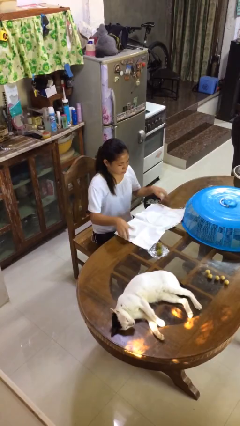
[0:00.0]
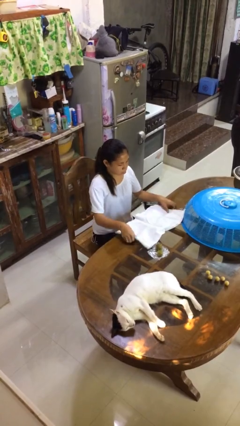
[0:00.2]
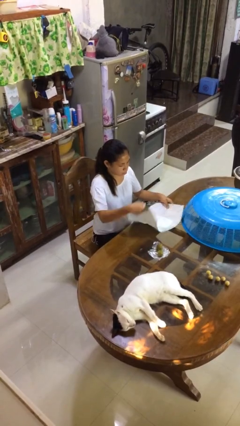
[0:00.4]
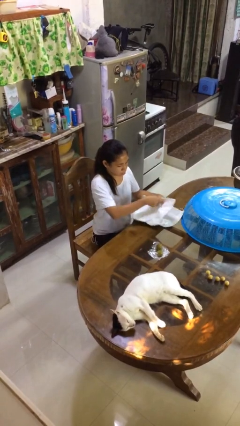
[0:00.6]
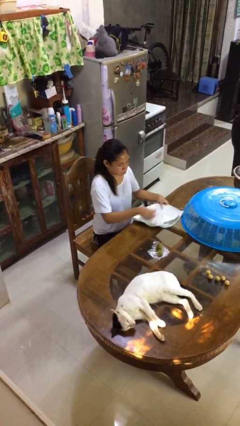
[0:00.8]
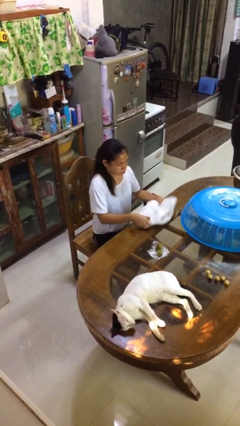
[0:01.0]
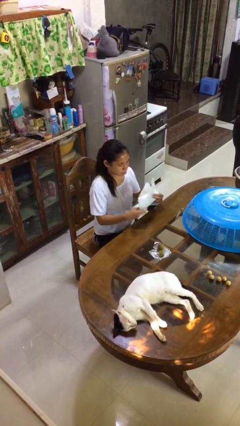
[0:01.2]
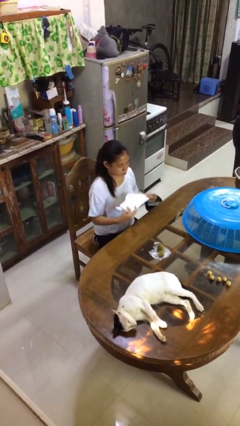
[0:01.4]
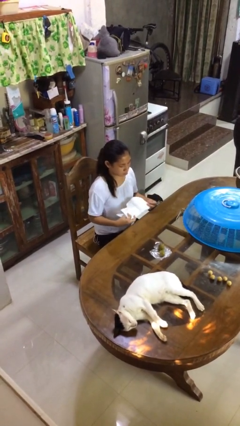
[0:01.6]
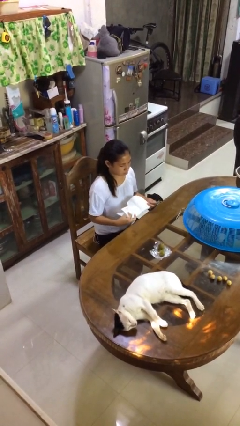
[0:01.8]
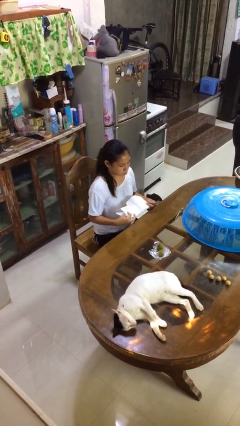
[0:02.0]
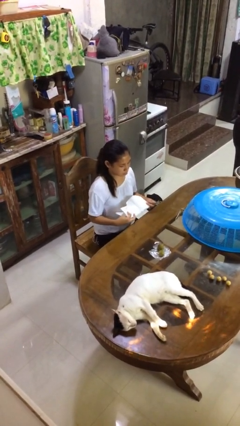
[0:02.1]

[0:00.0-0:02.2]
person folds tablecloth

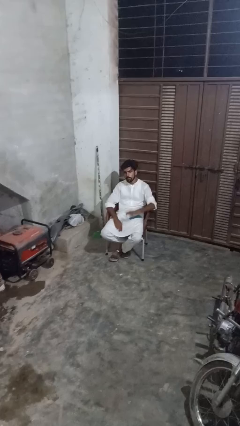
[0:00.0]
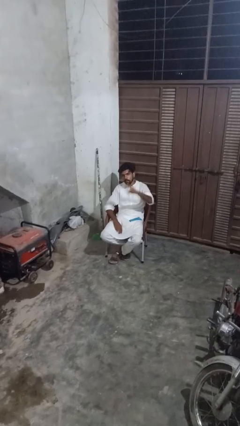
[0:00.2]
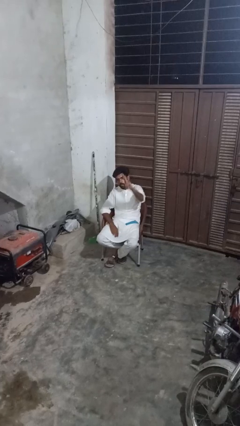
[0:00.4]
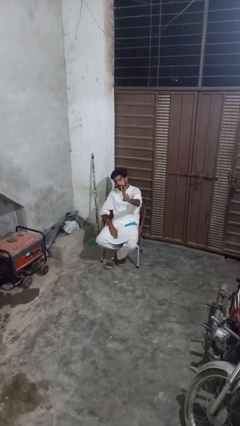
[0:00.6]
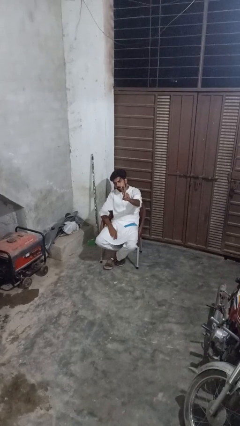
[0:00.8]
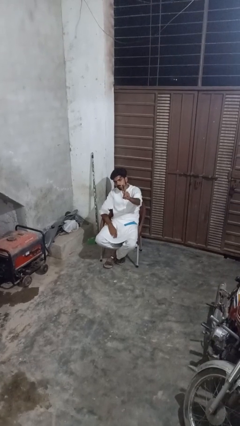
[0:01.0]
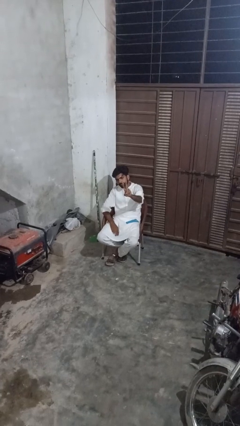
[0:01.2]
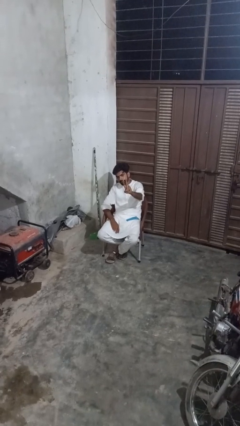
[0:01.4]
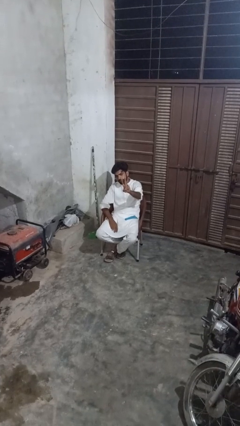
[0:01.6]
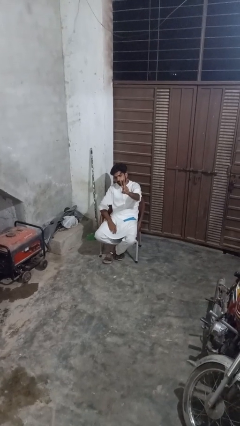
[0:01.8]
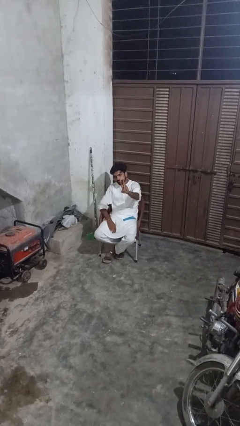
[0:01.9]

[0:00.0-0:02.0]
person gestures peace

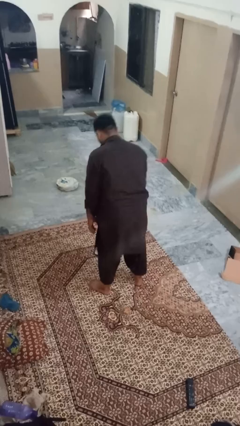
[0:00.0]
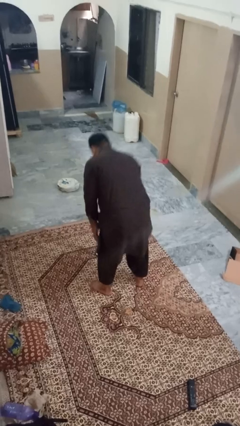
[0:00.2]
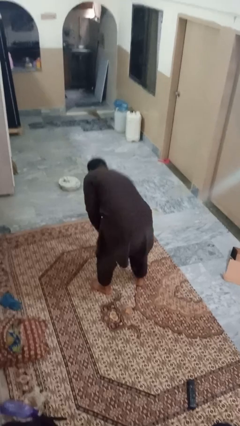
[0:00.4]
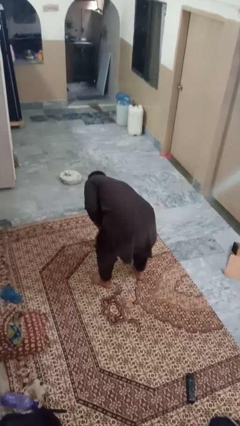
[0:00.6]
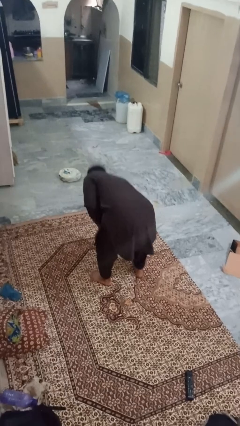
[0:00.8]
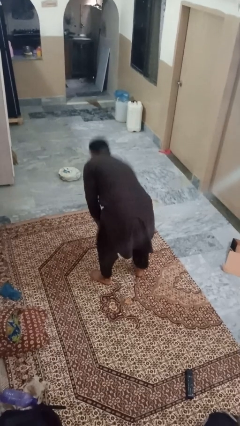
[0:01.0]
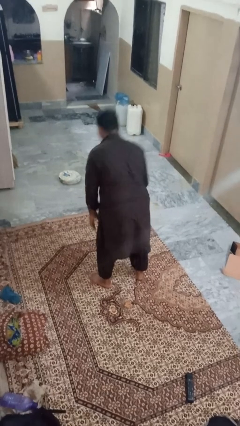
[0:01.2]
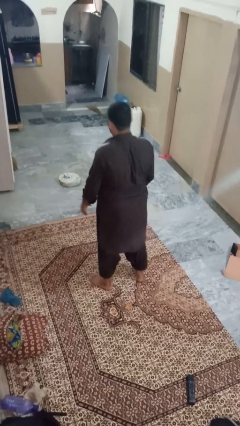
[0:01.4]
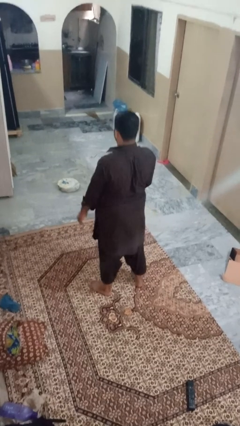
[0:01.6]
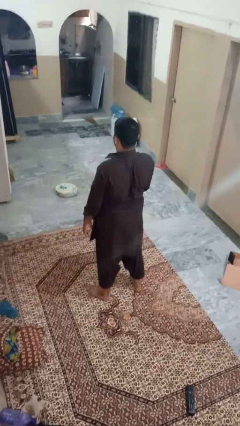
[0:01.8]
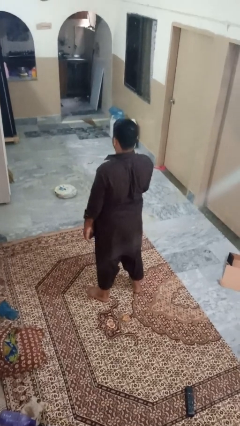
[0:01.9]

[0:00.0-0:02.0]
person picks up object from floor

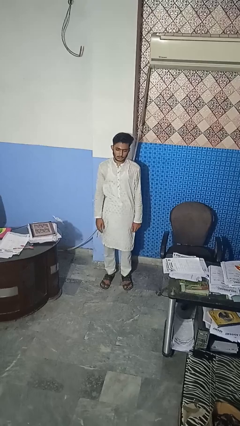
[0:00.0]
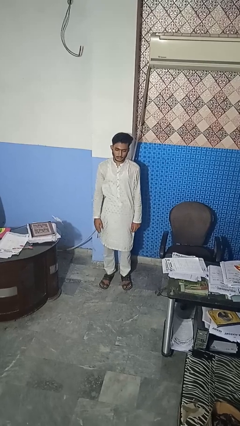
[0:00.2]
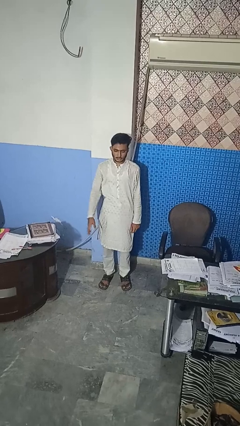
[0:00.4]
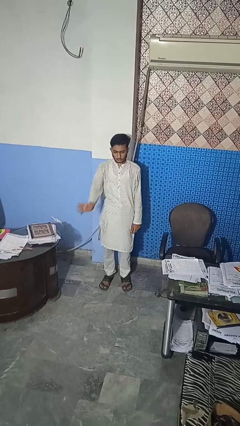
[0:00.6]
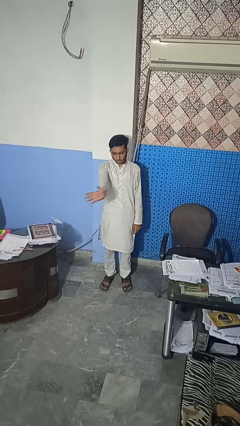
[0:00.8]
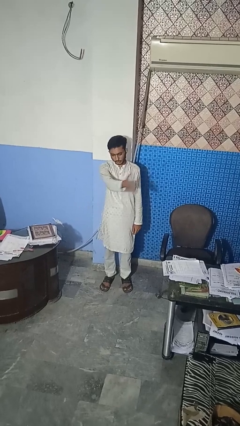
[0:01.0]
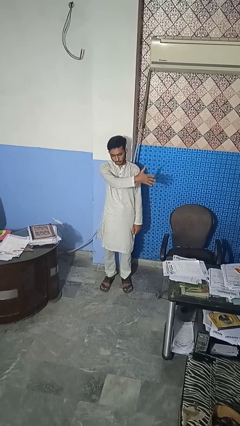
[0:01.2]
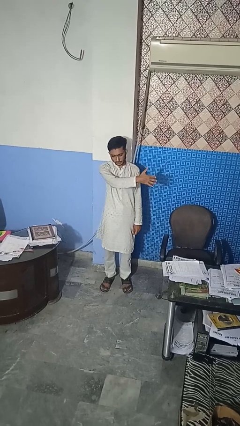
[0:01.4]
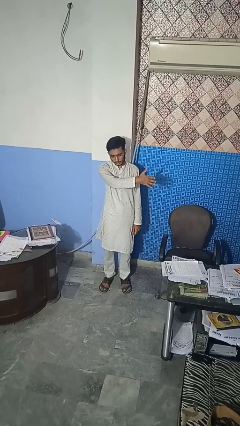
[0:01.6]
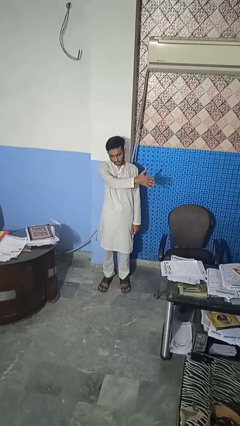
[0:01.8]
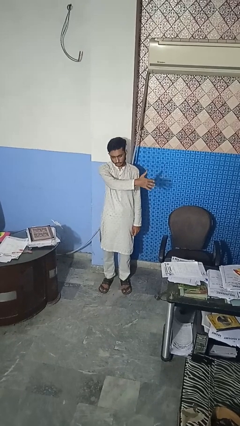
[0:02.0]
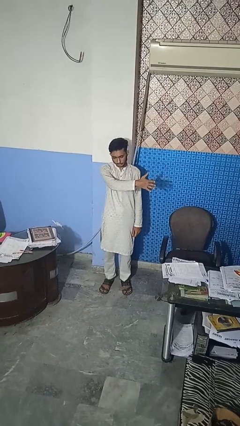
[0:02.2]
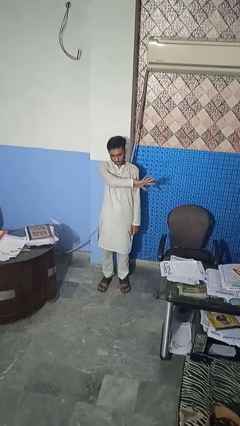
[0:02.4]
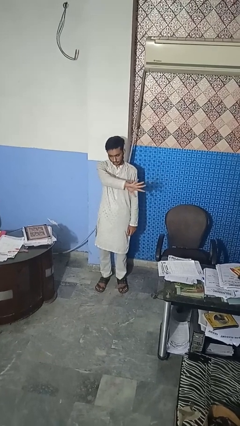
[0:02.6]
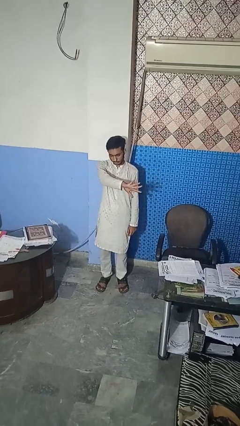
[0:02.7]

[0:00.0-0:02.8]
person gestures swipe left

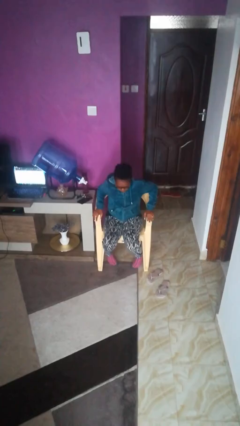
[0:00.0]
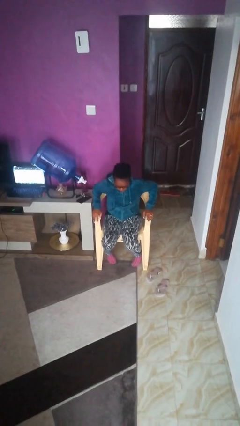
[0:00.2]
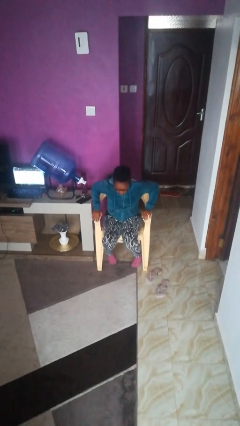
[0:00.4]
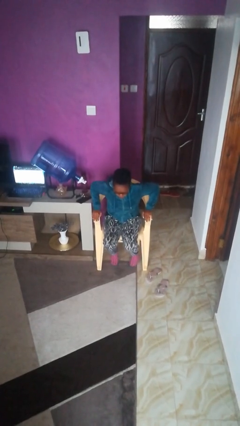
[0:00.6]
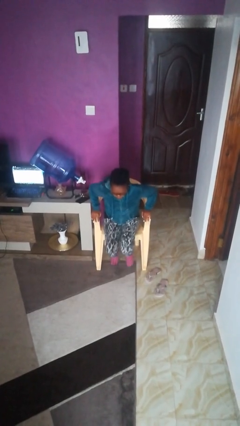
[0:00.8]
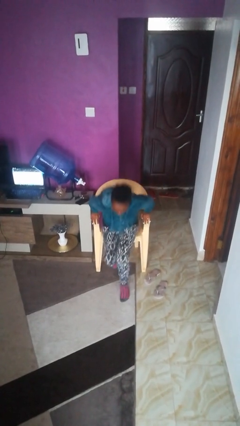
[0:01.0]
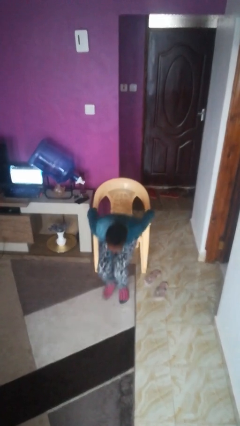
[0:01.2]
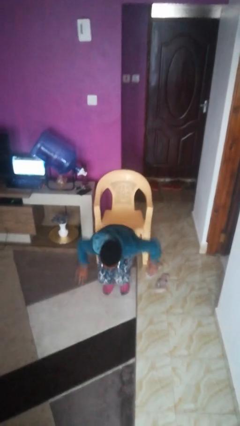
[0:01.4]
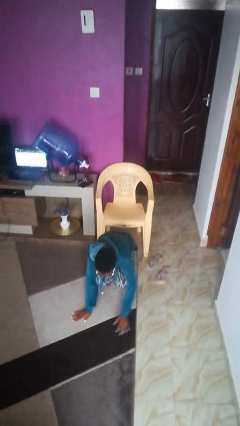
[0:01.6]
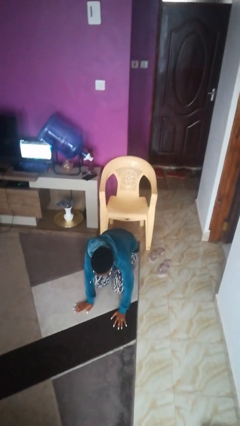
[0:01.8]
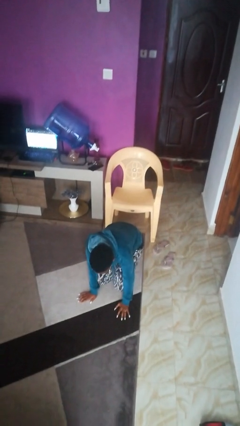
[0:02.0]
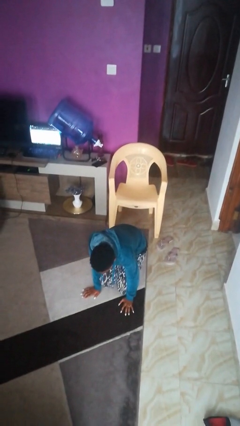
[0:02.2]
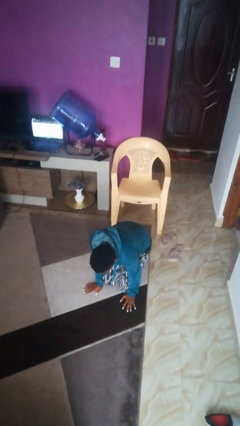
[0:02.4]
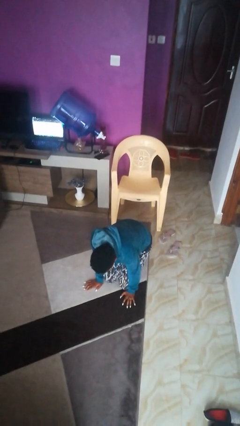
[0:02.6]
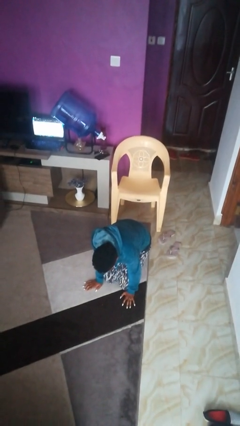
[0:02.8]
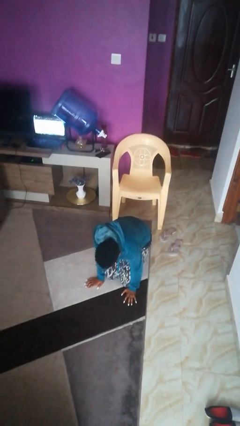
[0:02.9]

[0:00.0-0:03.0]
person falls from chair

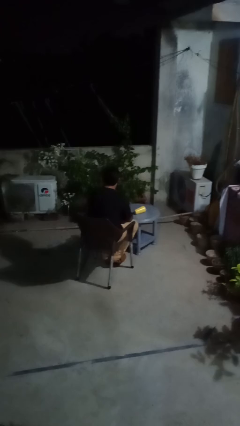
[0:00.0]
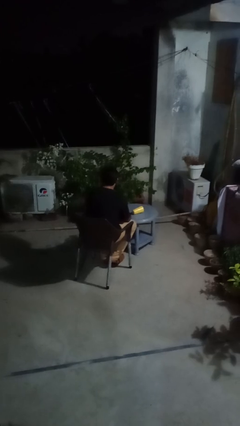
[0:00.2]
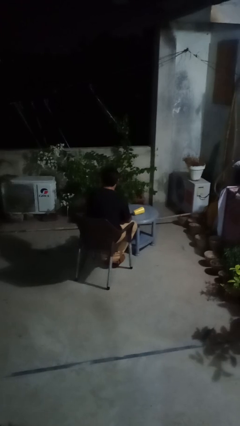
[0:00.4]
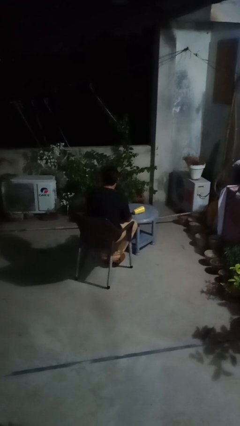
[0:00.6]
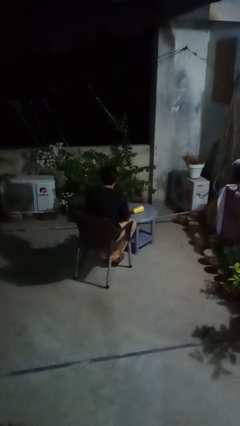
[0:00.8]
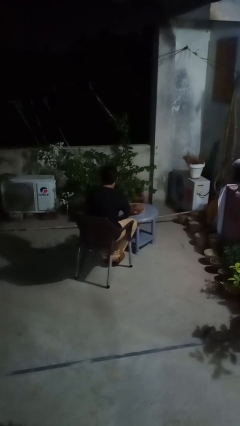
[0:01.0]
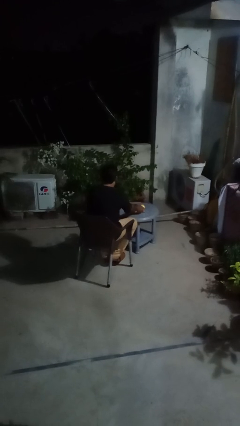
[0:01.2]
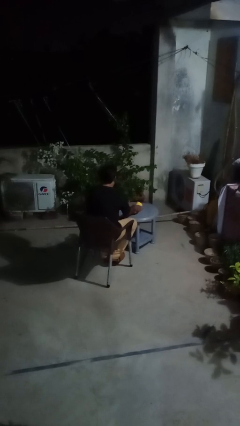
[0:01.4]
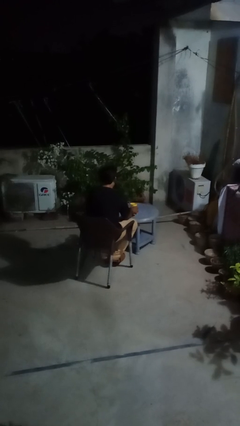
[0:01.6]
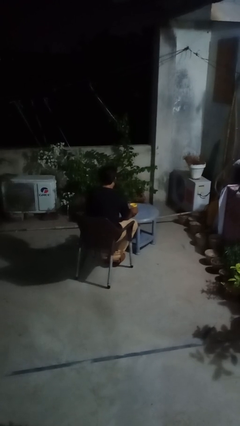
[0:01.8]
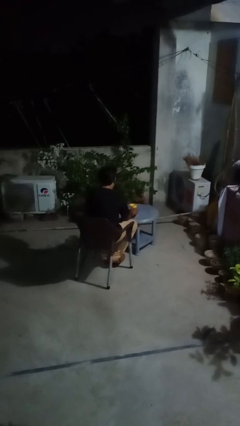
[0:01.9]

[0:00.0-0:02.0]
person sets upright glass

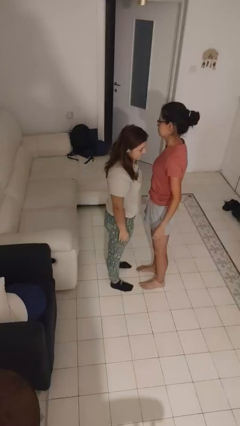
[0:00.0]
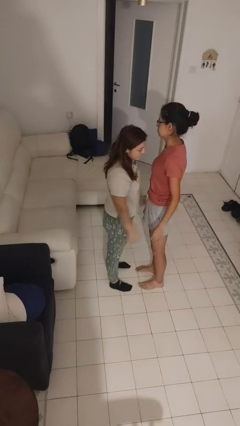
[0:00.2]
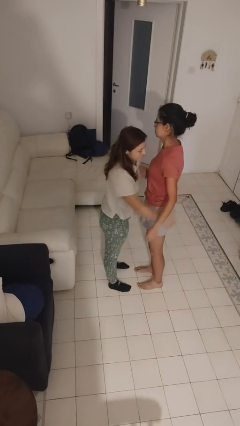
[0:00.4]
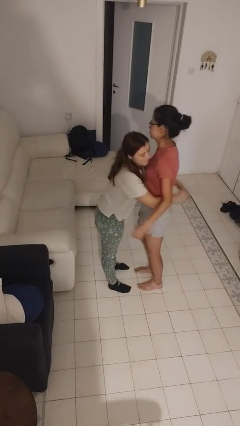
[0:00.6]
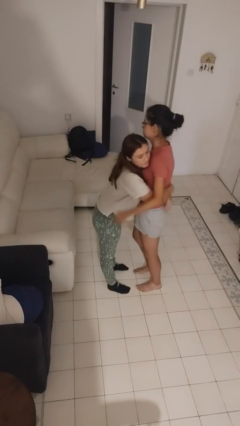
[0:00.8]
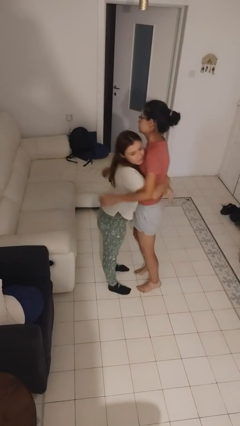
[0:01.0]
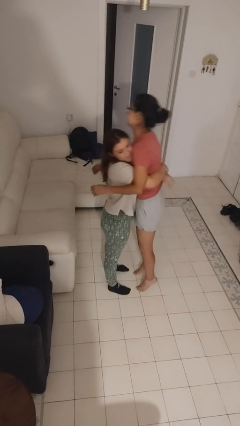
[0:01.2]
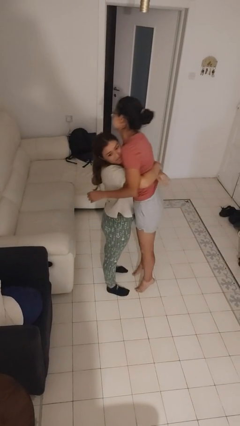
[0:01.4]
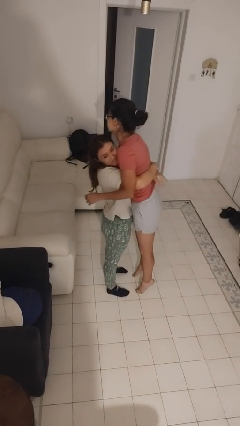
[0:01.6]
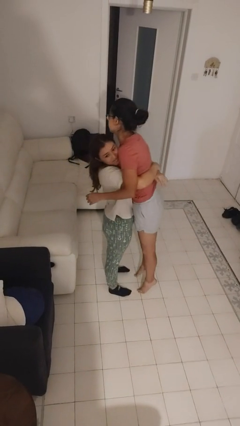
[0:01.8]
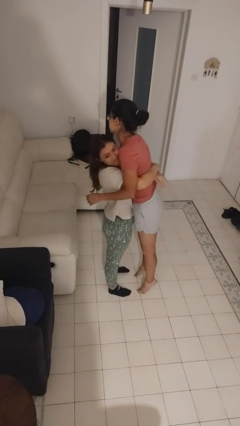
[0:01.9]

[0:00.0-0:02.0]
person picks up person

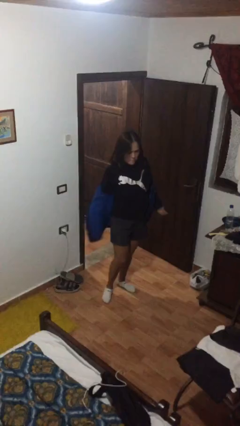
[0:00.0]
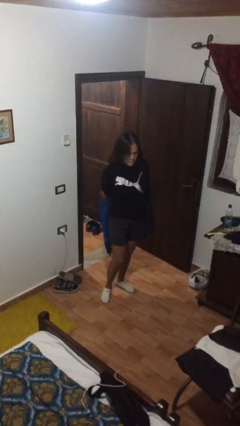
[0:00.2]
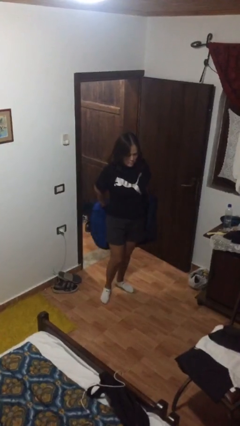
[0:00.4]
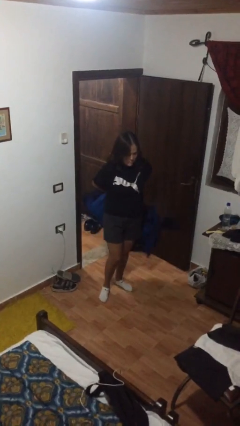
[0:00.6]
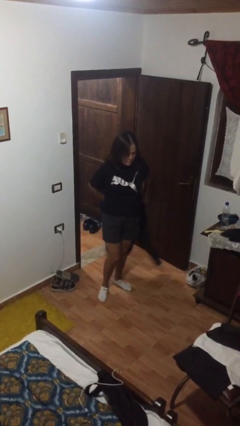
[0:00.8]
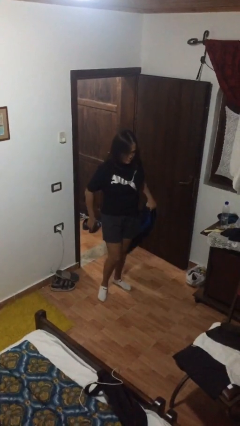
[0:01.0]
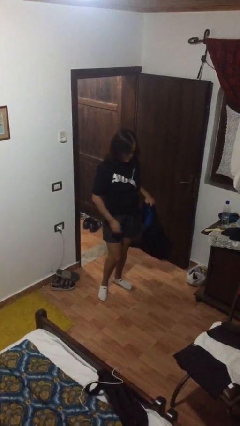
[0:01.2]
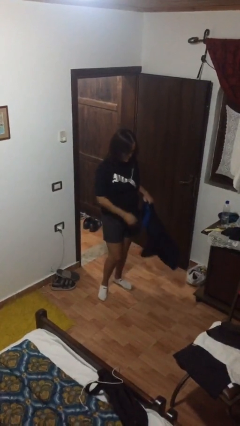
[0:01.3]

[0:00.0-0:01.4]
person takes off jacket
